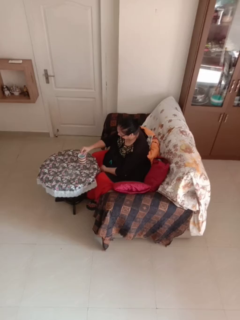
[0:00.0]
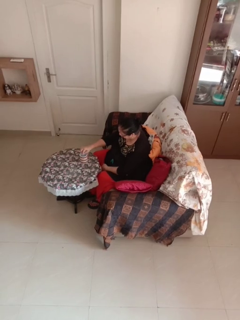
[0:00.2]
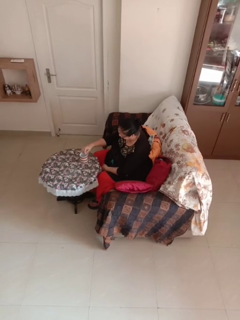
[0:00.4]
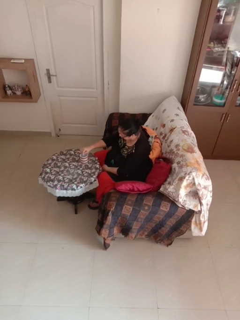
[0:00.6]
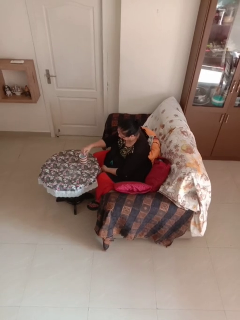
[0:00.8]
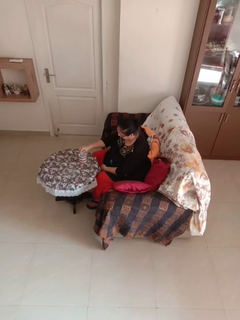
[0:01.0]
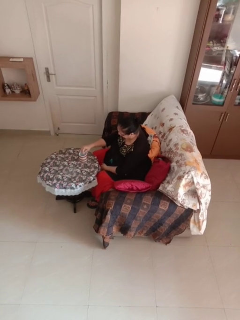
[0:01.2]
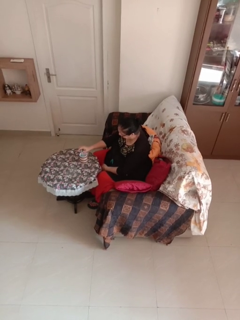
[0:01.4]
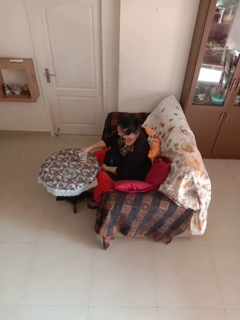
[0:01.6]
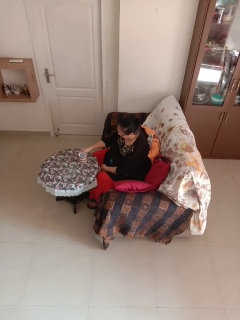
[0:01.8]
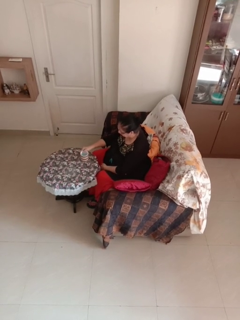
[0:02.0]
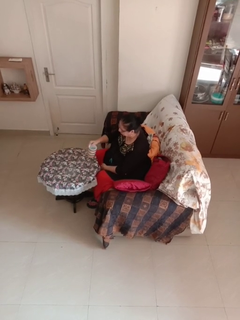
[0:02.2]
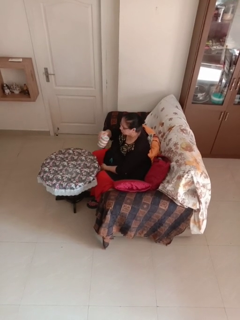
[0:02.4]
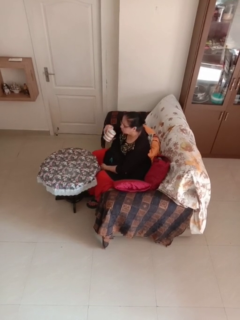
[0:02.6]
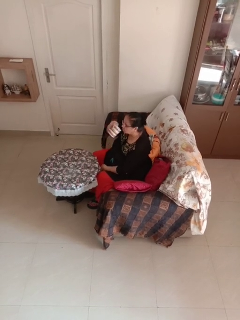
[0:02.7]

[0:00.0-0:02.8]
person stirs mug

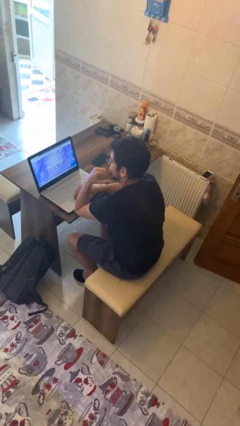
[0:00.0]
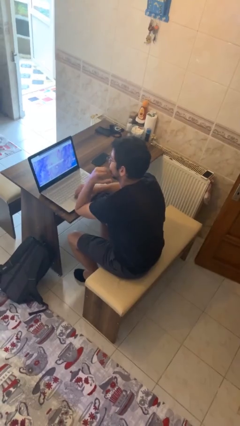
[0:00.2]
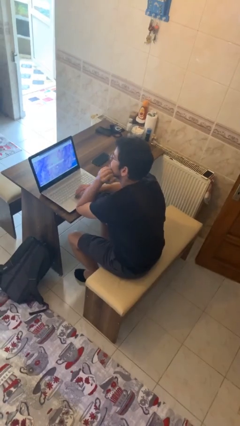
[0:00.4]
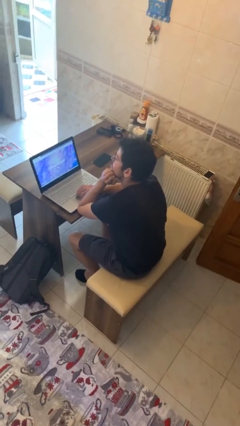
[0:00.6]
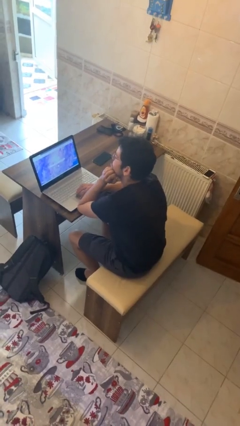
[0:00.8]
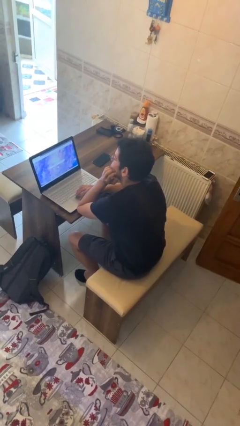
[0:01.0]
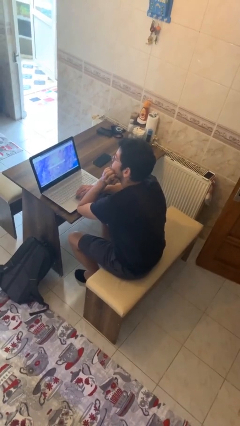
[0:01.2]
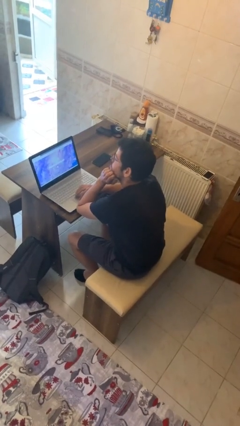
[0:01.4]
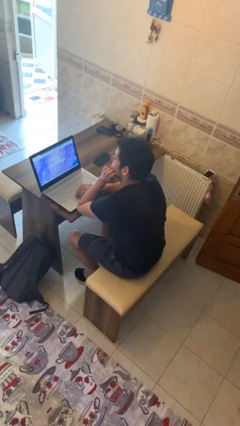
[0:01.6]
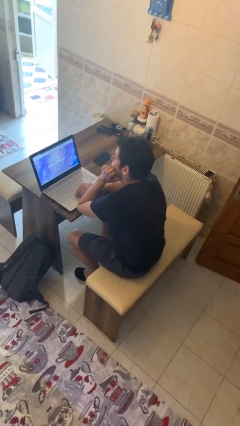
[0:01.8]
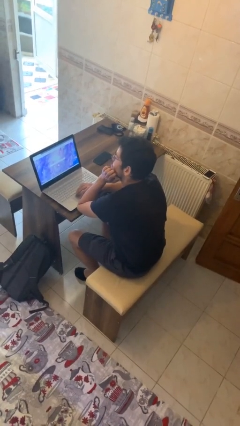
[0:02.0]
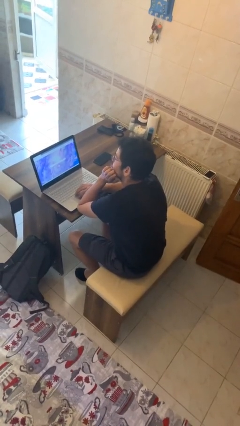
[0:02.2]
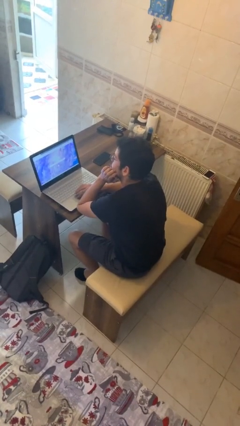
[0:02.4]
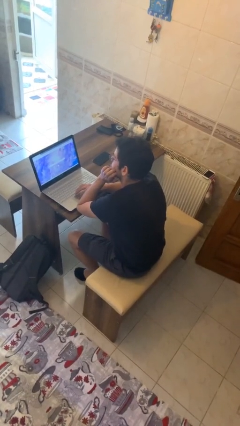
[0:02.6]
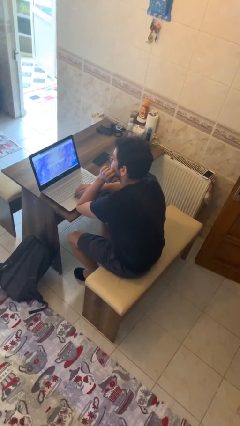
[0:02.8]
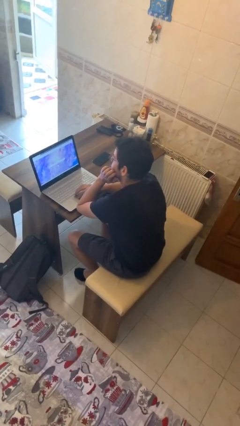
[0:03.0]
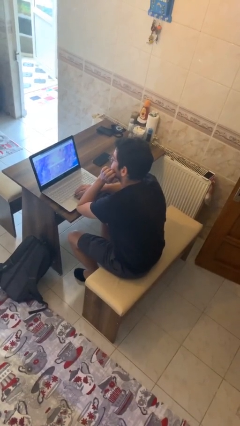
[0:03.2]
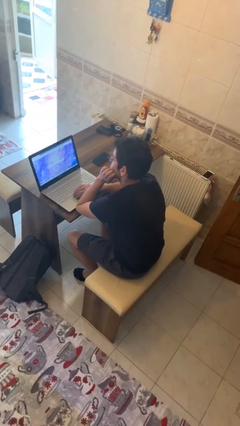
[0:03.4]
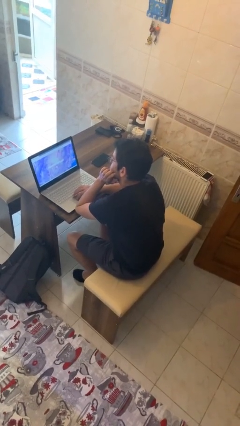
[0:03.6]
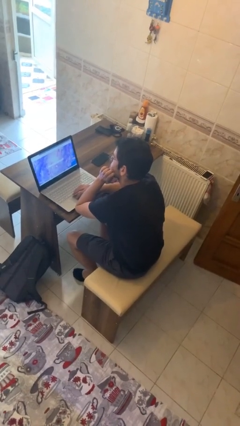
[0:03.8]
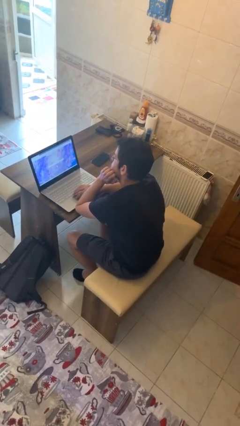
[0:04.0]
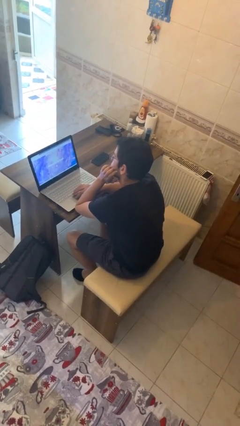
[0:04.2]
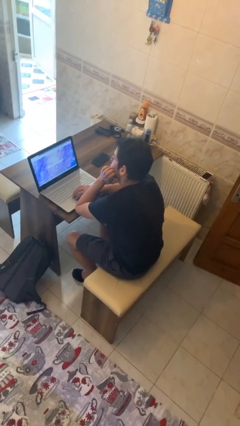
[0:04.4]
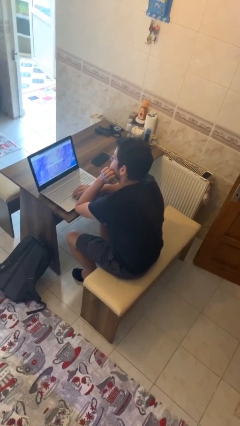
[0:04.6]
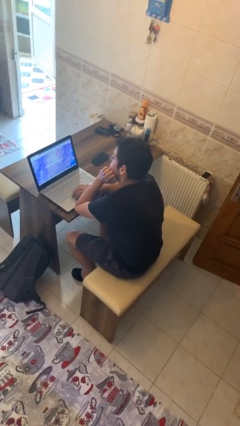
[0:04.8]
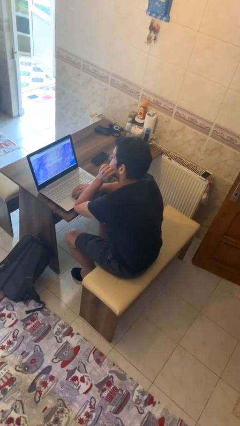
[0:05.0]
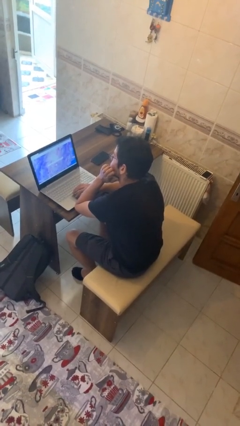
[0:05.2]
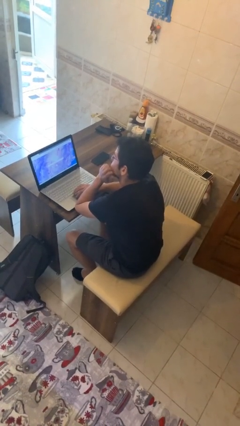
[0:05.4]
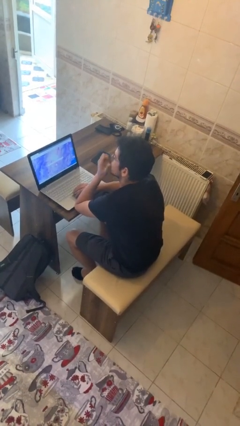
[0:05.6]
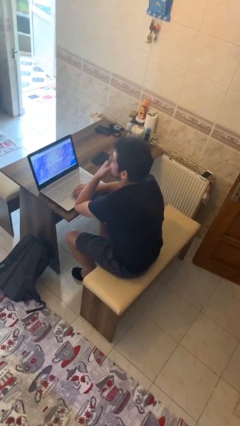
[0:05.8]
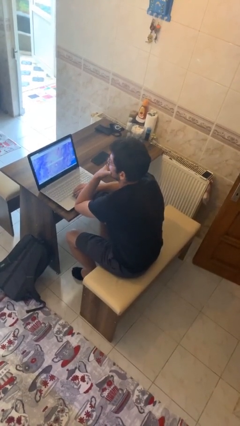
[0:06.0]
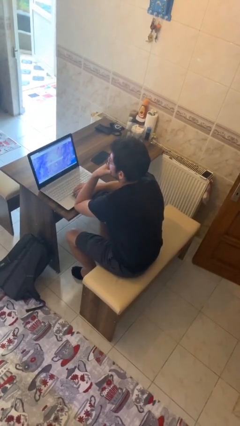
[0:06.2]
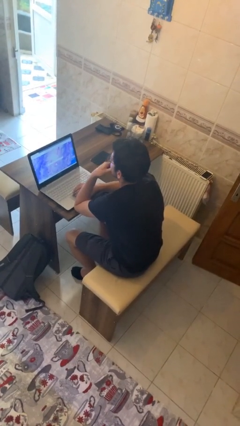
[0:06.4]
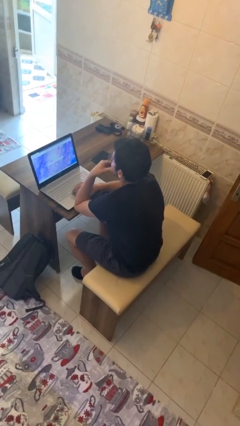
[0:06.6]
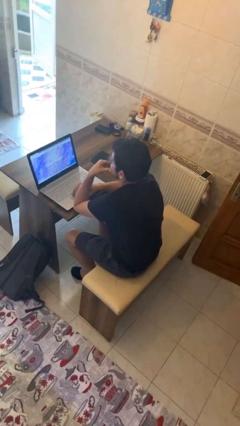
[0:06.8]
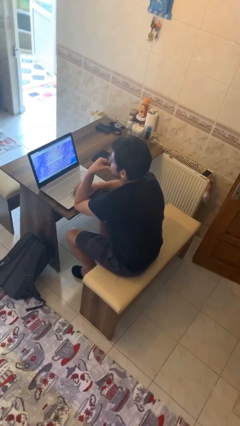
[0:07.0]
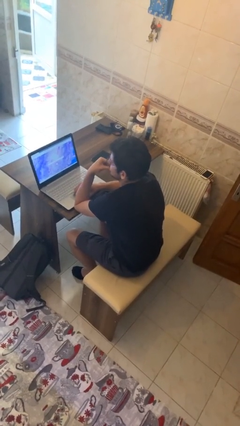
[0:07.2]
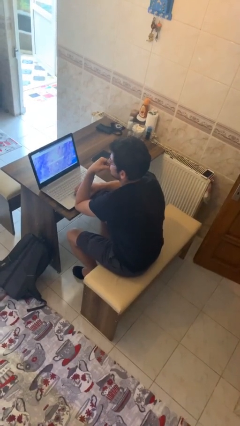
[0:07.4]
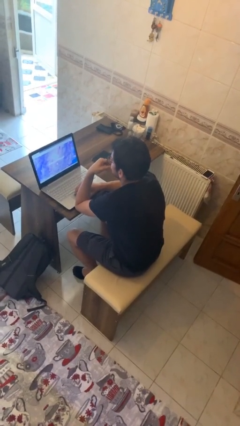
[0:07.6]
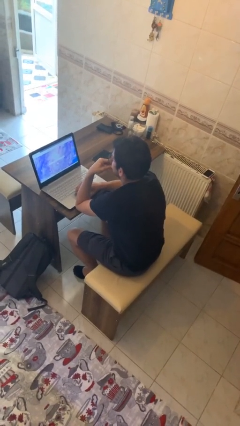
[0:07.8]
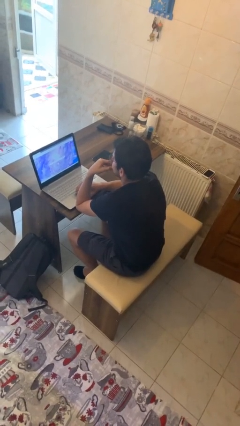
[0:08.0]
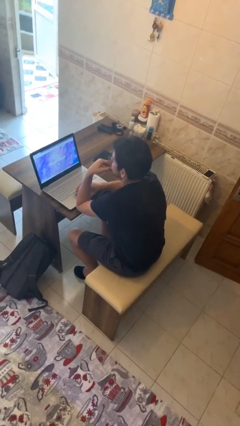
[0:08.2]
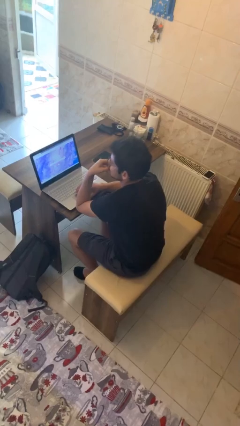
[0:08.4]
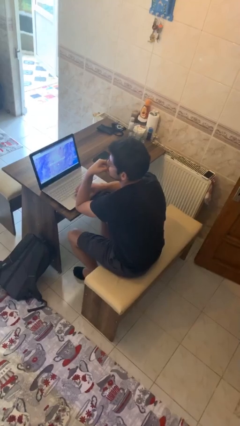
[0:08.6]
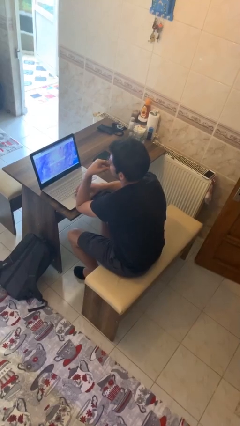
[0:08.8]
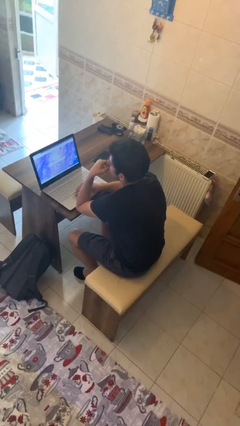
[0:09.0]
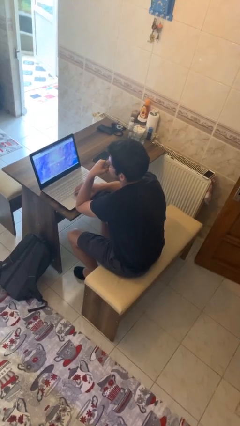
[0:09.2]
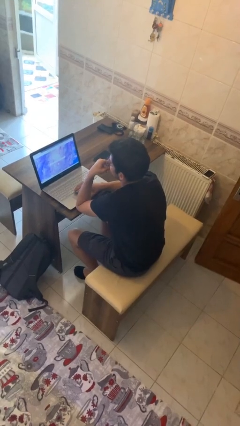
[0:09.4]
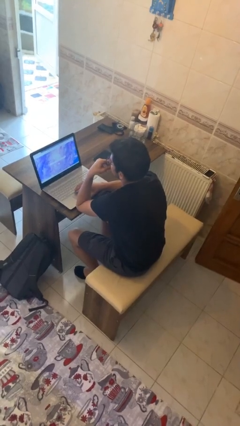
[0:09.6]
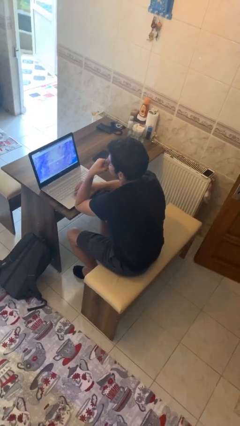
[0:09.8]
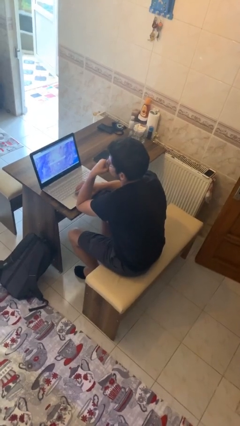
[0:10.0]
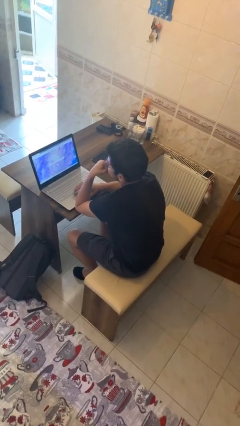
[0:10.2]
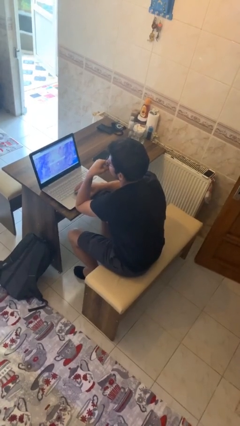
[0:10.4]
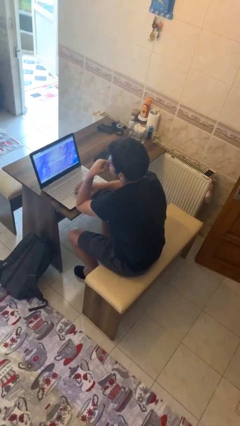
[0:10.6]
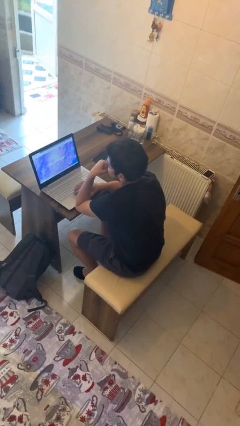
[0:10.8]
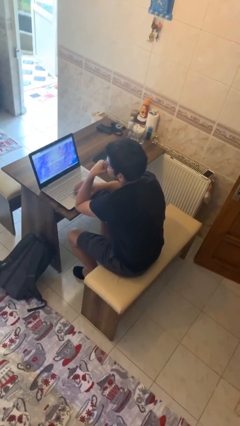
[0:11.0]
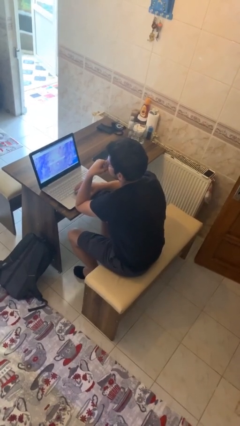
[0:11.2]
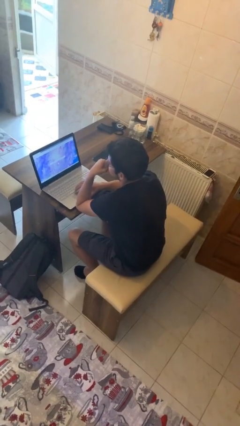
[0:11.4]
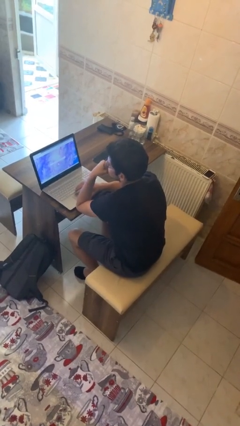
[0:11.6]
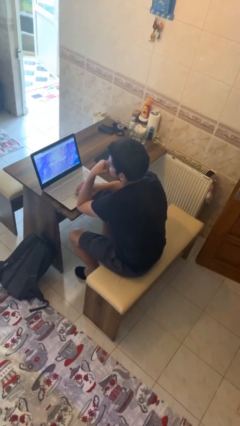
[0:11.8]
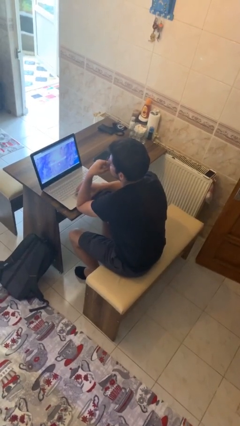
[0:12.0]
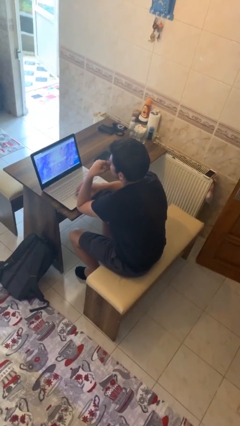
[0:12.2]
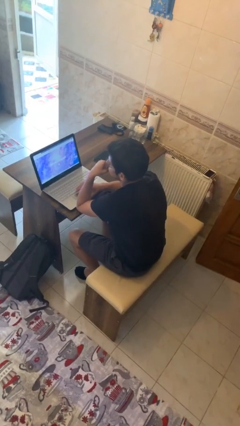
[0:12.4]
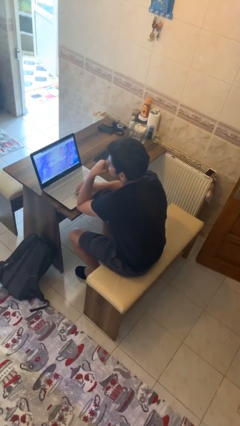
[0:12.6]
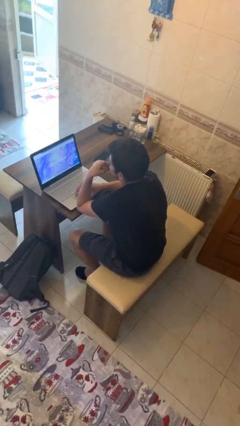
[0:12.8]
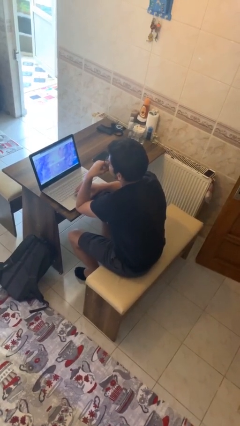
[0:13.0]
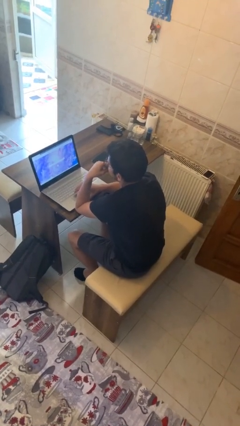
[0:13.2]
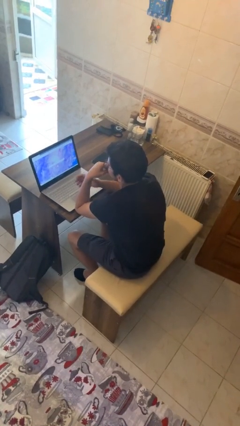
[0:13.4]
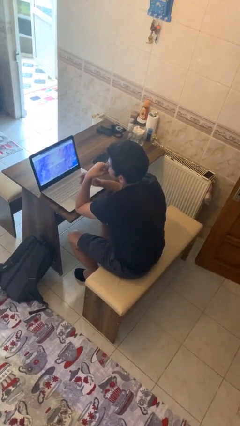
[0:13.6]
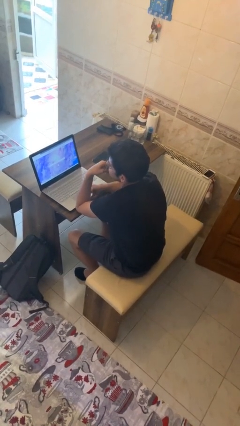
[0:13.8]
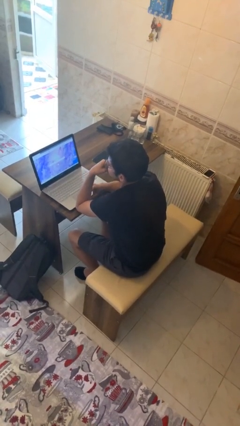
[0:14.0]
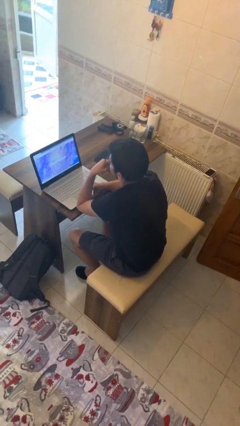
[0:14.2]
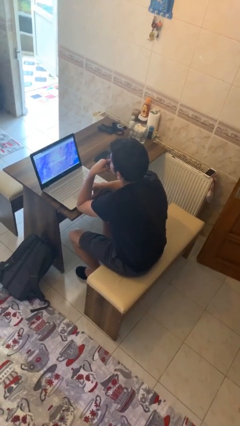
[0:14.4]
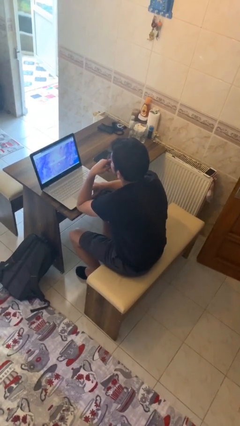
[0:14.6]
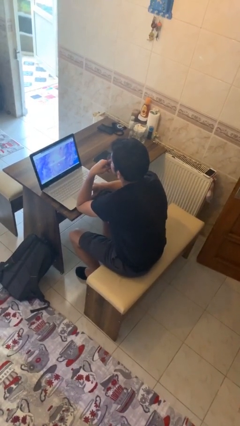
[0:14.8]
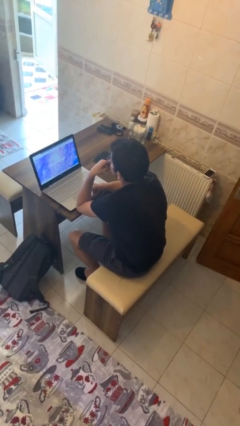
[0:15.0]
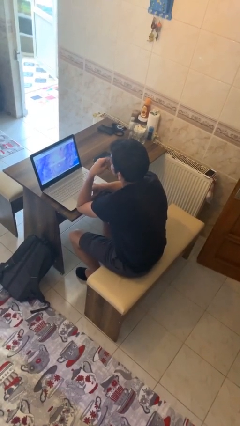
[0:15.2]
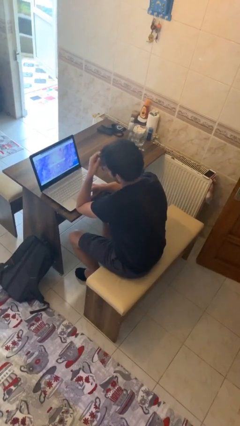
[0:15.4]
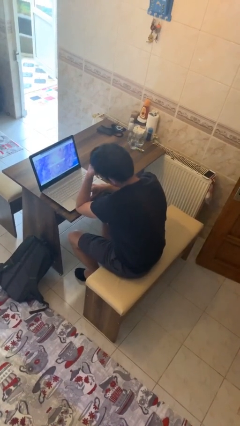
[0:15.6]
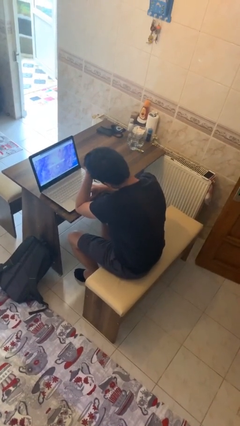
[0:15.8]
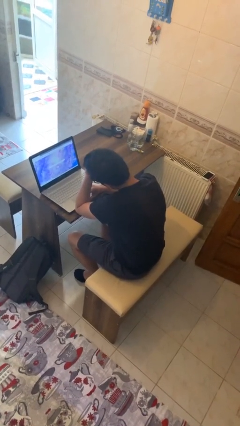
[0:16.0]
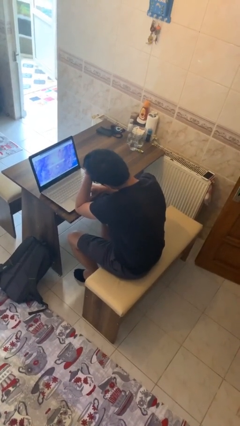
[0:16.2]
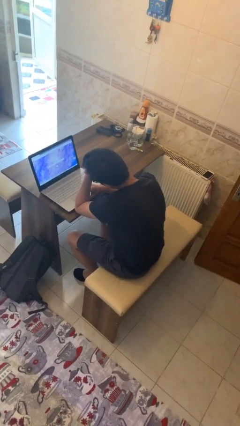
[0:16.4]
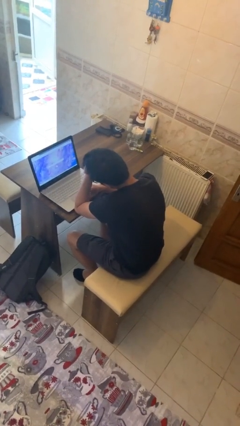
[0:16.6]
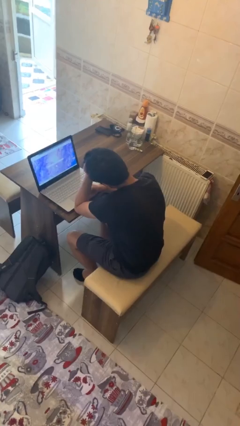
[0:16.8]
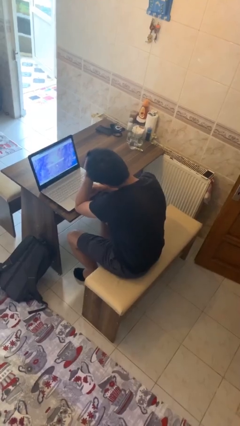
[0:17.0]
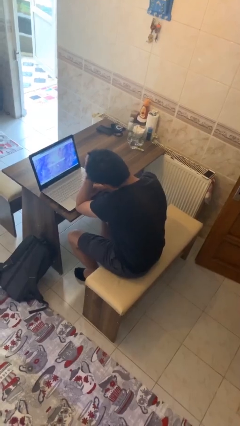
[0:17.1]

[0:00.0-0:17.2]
person interacts with laptop
